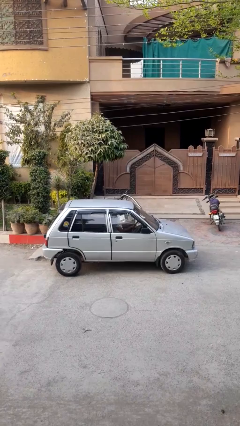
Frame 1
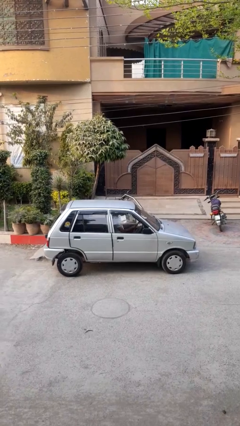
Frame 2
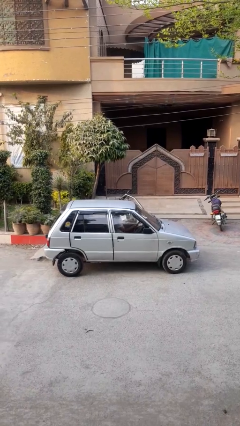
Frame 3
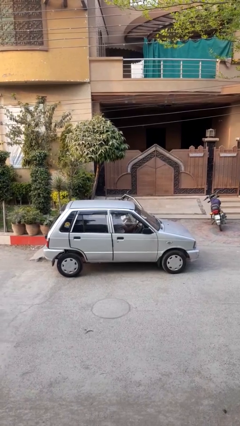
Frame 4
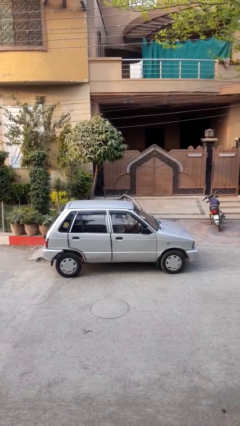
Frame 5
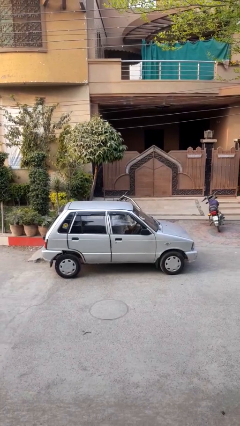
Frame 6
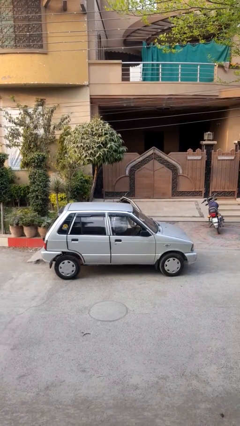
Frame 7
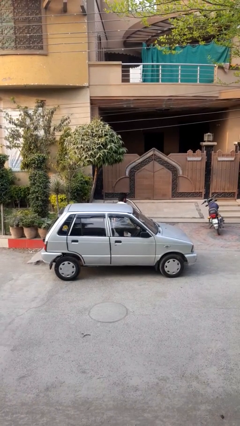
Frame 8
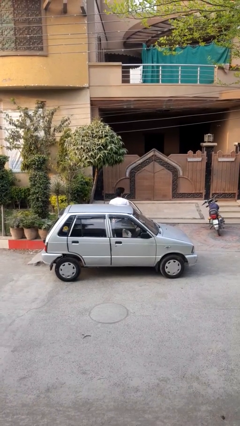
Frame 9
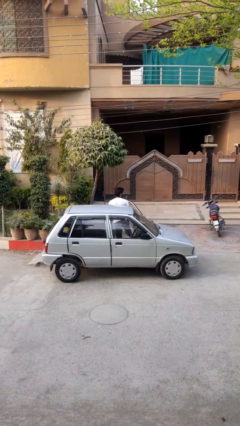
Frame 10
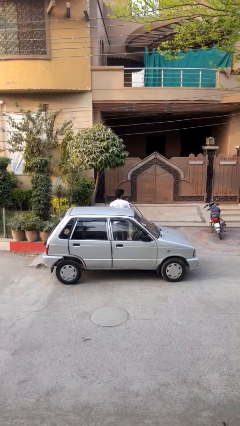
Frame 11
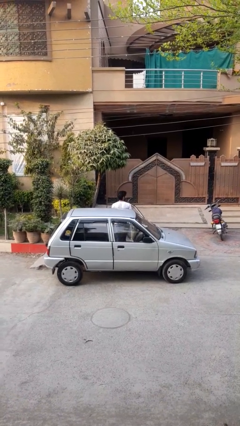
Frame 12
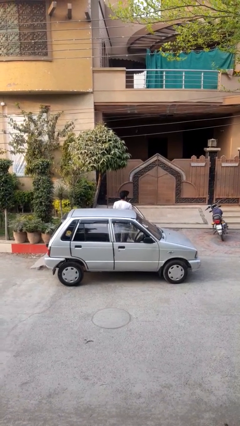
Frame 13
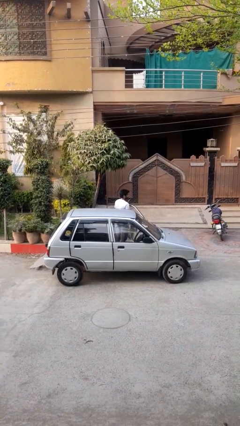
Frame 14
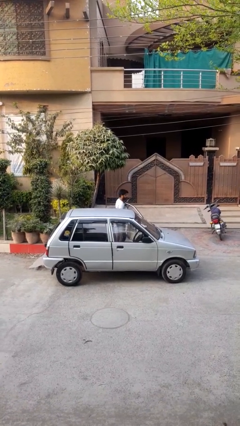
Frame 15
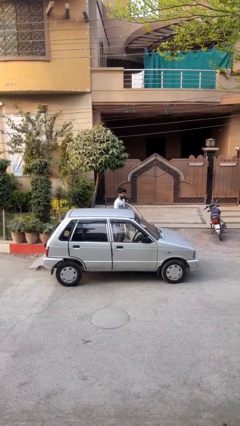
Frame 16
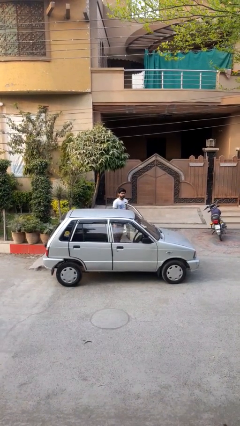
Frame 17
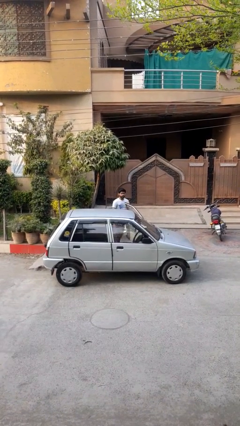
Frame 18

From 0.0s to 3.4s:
person exits car

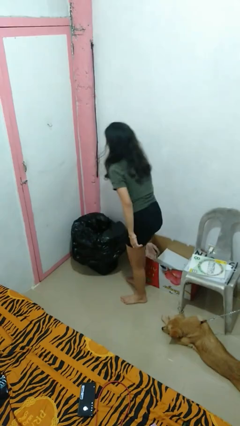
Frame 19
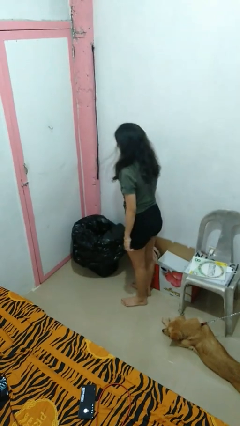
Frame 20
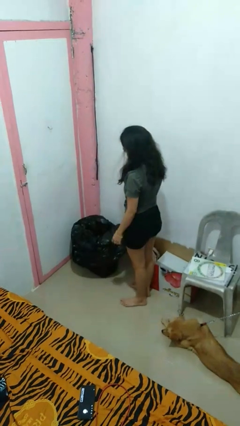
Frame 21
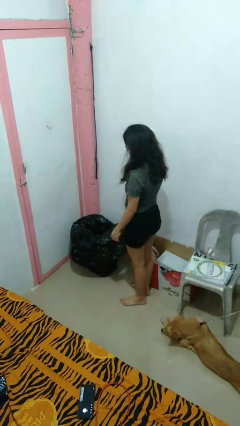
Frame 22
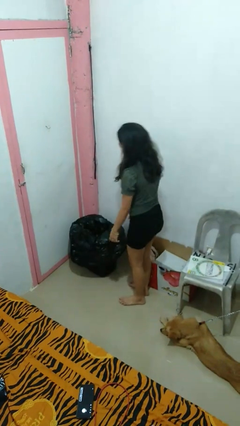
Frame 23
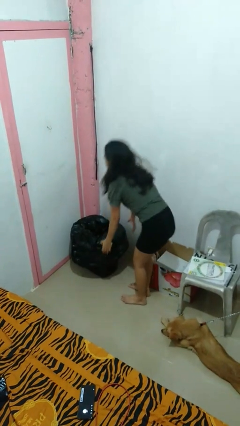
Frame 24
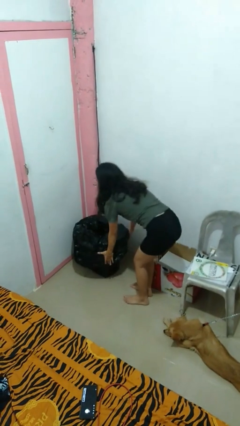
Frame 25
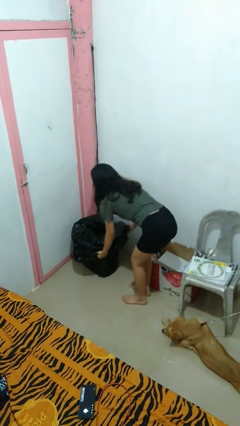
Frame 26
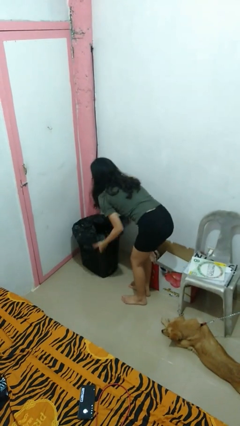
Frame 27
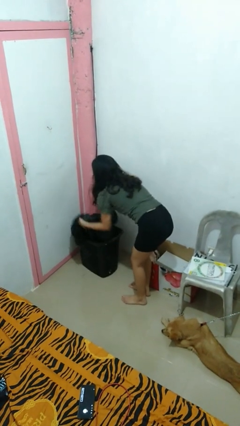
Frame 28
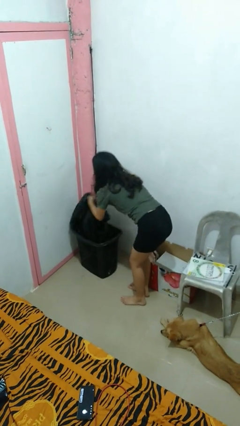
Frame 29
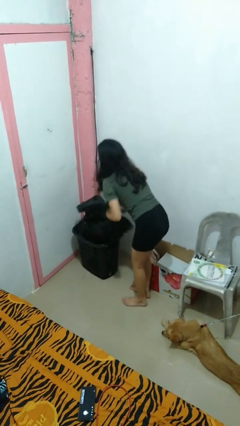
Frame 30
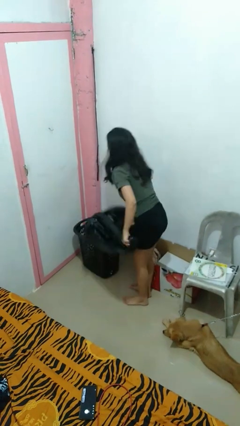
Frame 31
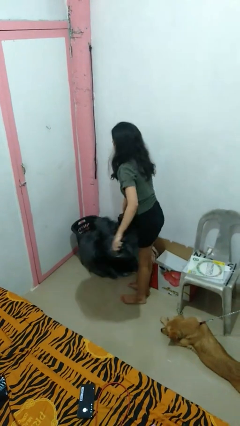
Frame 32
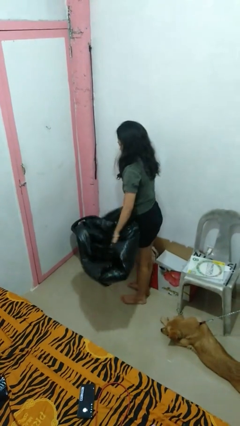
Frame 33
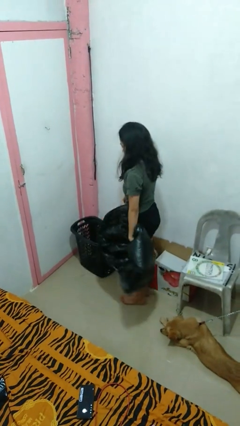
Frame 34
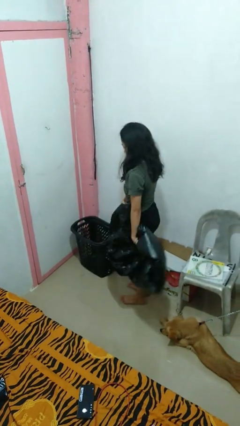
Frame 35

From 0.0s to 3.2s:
person removes trashbag from trashcan

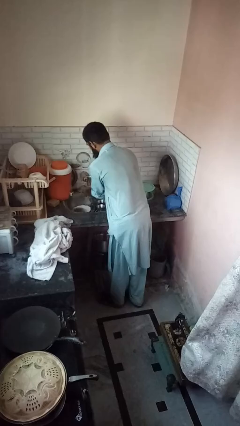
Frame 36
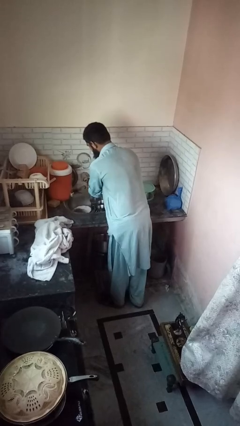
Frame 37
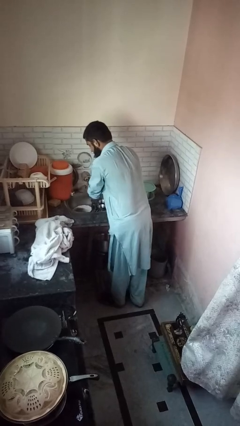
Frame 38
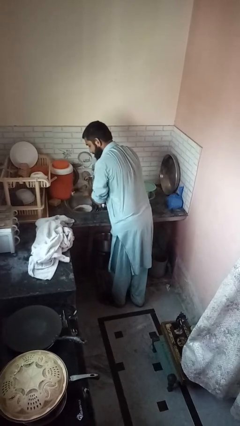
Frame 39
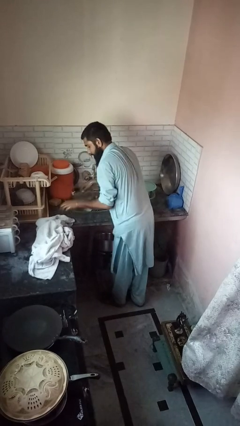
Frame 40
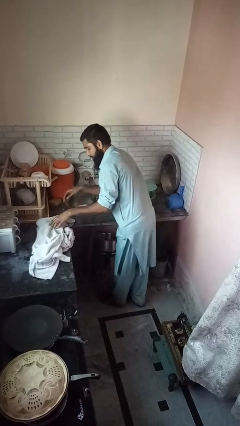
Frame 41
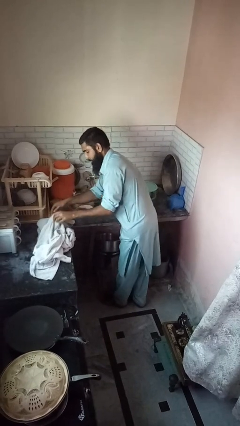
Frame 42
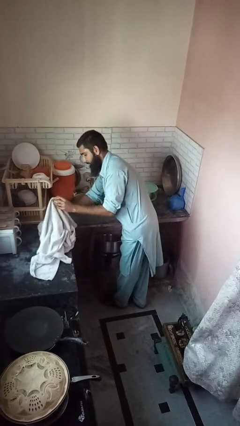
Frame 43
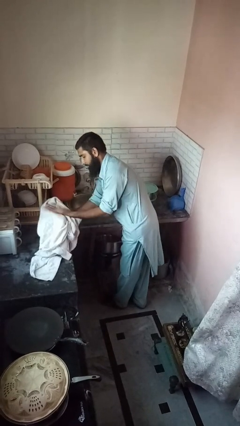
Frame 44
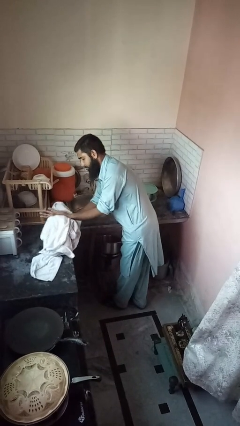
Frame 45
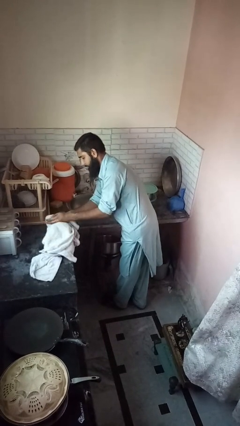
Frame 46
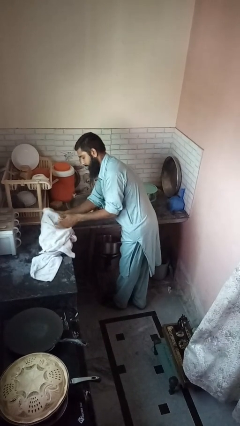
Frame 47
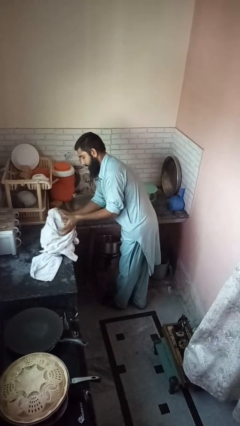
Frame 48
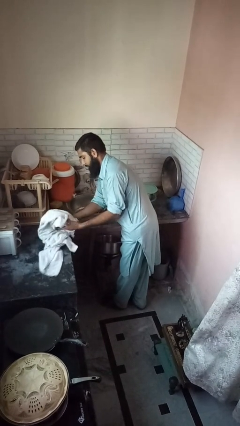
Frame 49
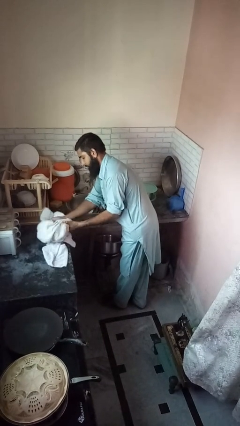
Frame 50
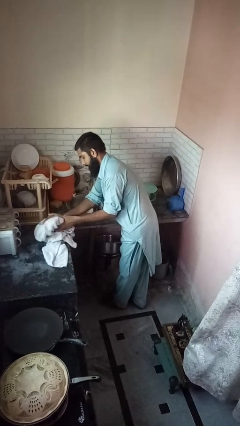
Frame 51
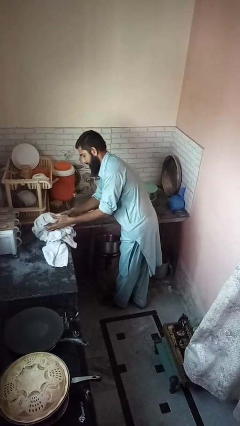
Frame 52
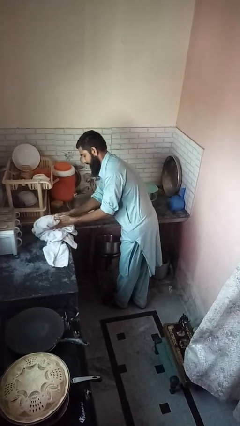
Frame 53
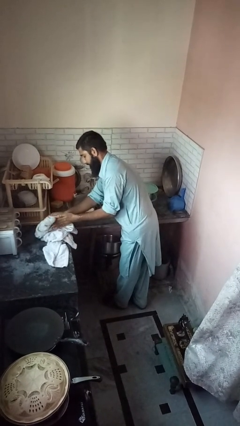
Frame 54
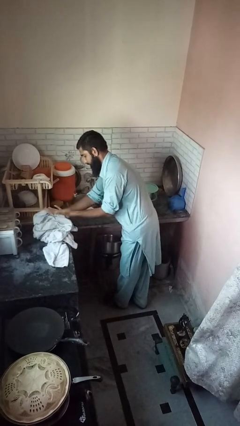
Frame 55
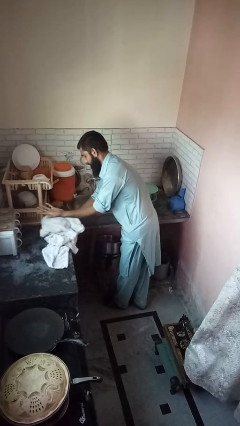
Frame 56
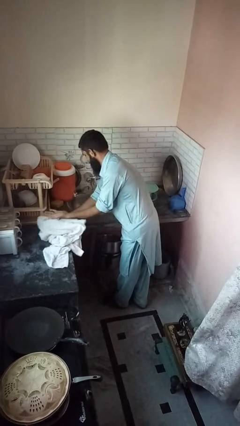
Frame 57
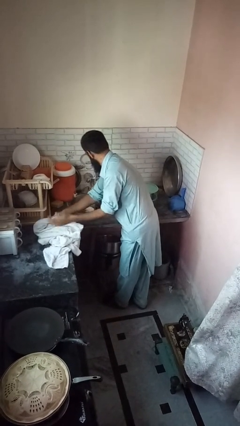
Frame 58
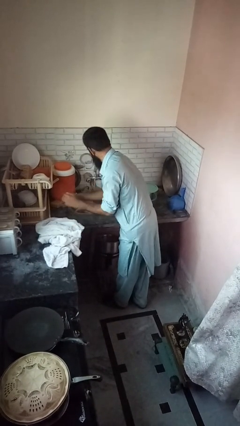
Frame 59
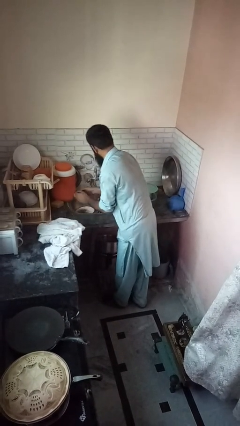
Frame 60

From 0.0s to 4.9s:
person dries hands with towel

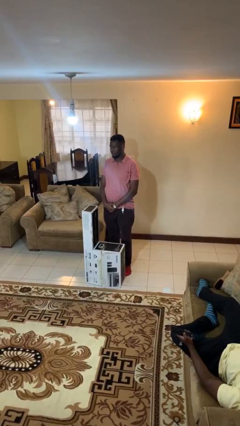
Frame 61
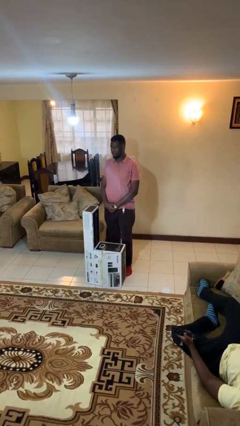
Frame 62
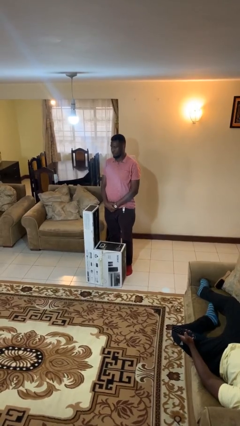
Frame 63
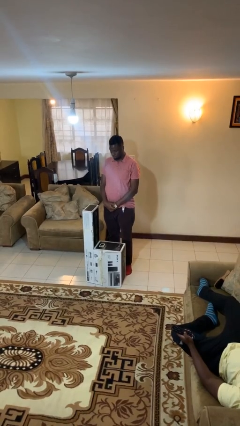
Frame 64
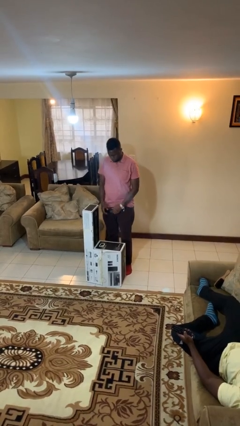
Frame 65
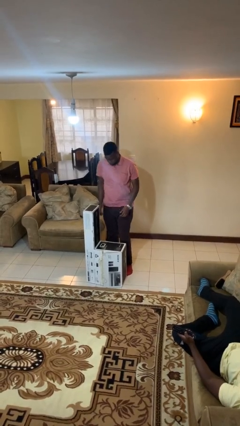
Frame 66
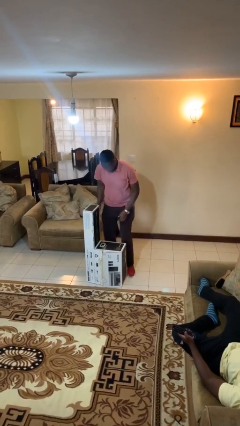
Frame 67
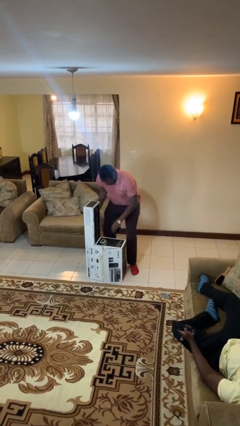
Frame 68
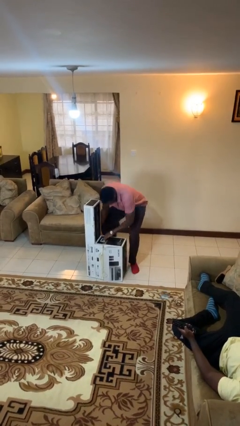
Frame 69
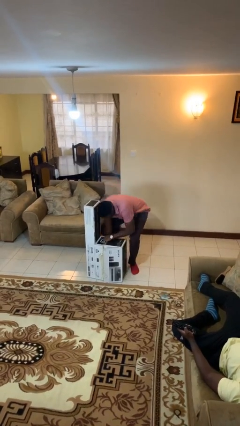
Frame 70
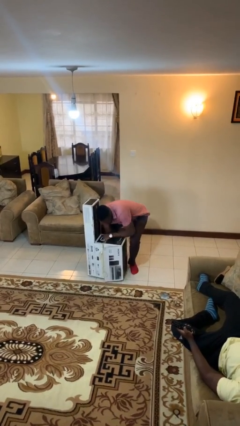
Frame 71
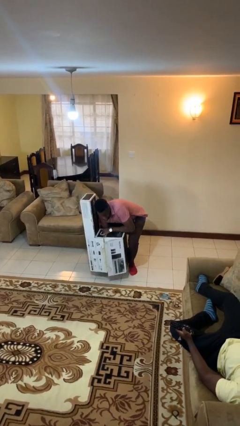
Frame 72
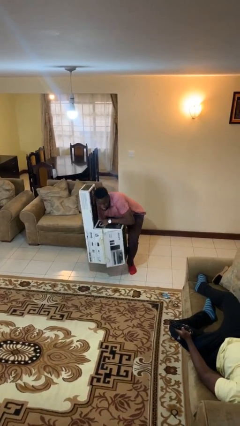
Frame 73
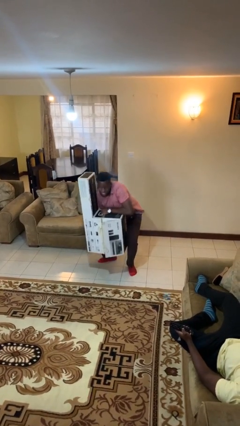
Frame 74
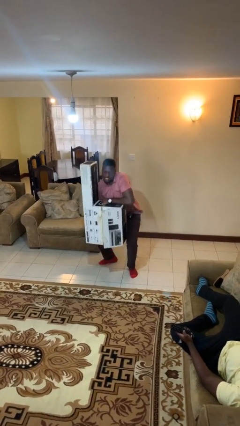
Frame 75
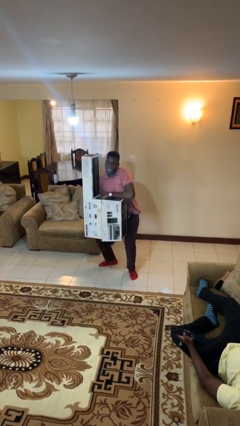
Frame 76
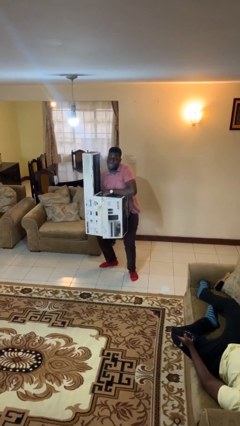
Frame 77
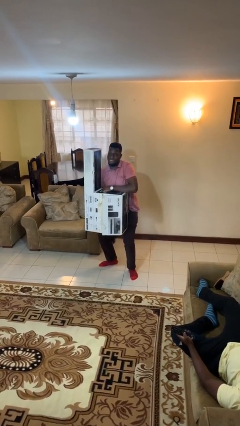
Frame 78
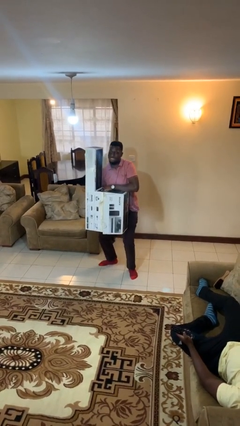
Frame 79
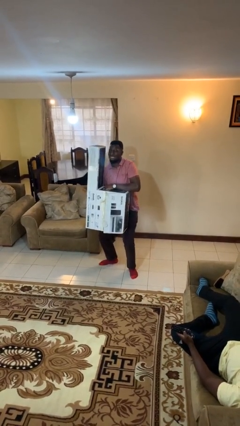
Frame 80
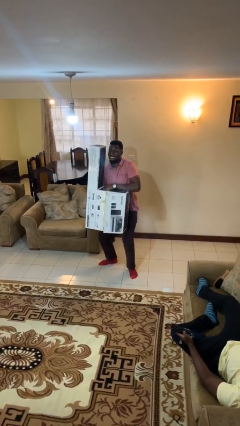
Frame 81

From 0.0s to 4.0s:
person picks up object from floor

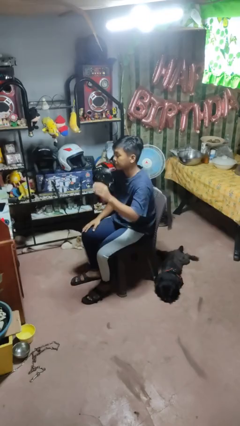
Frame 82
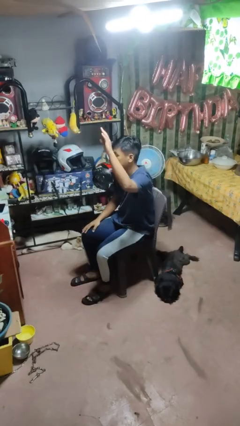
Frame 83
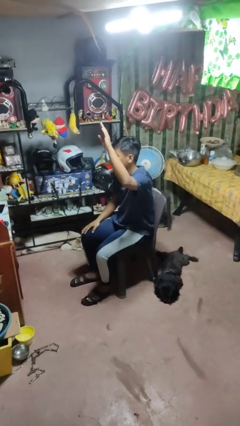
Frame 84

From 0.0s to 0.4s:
person gestures raise hand

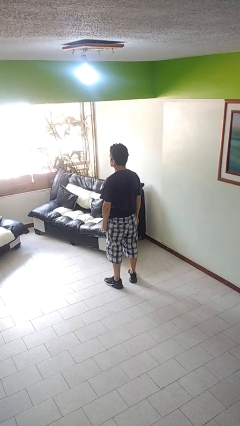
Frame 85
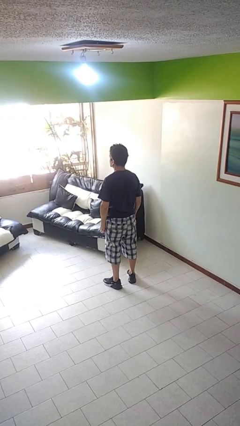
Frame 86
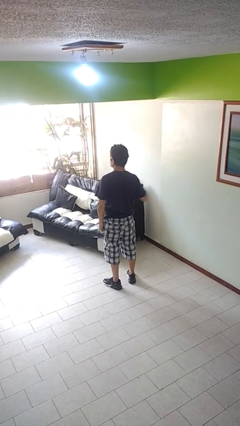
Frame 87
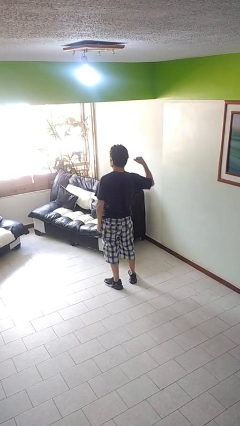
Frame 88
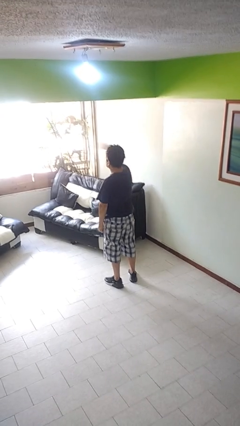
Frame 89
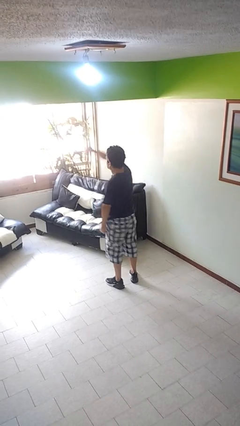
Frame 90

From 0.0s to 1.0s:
person punches

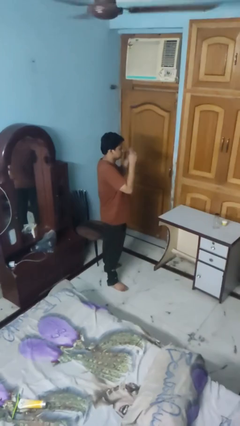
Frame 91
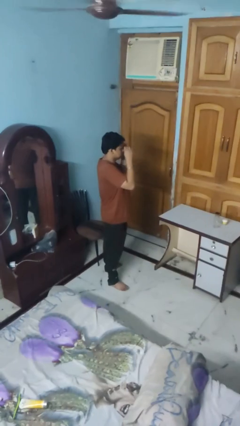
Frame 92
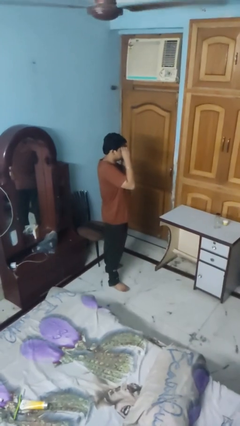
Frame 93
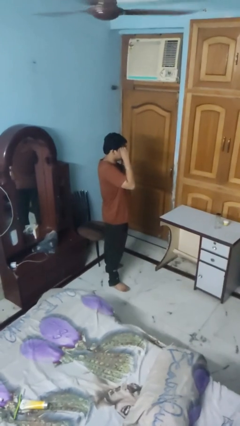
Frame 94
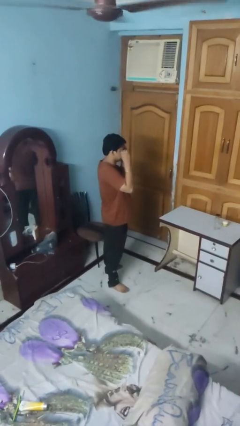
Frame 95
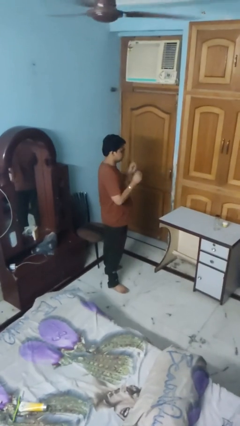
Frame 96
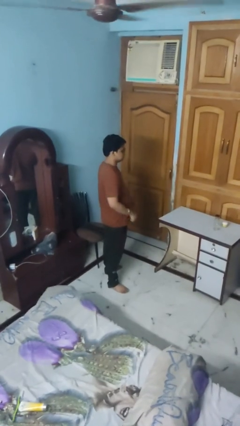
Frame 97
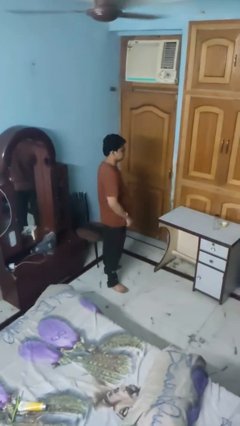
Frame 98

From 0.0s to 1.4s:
person puts on sunglasses
